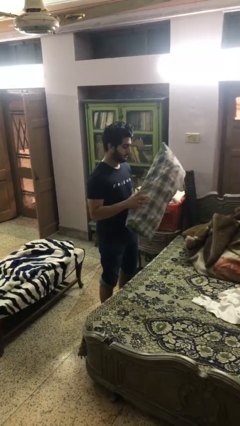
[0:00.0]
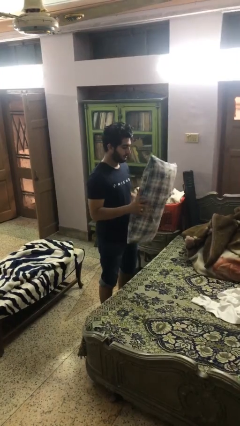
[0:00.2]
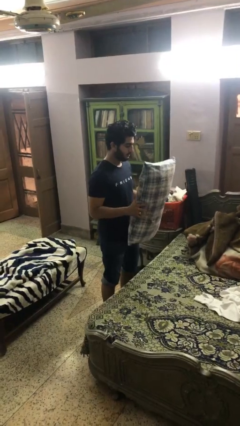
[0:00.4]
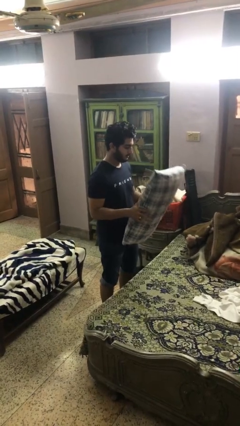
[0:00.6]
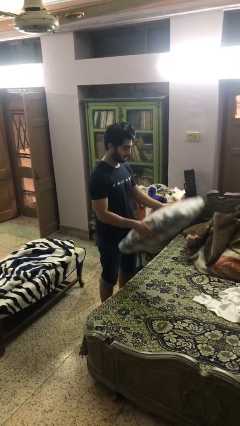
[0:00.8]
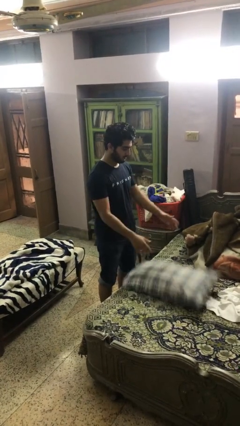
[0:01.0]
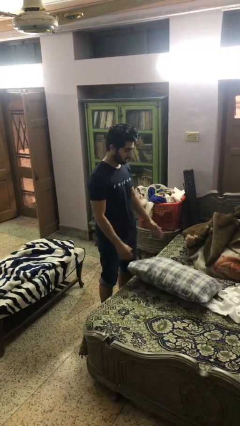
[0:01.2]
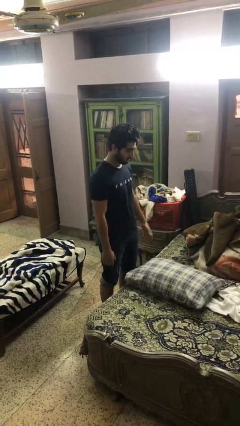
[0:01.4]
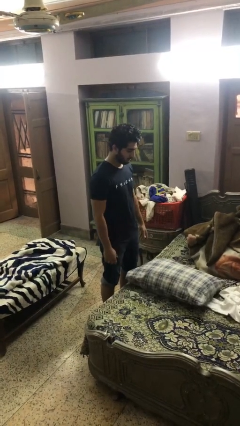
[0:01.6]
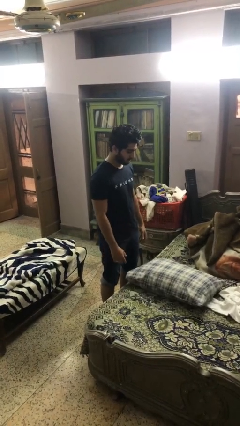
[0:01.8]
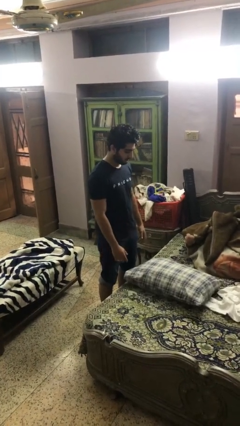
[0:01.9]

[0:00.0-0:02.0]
person puts down object on bed

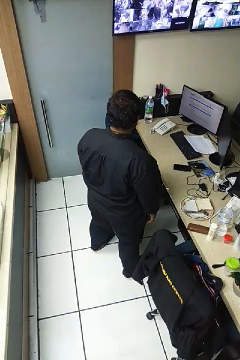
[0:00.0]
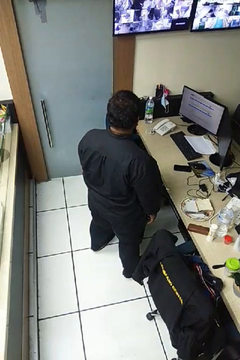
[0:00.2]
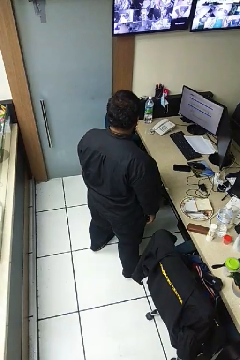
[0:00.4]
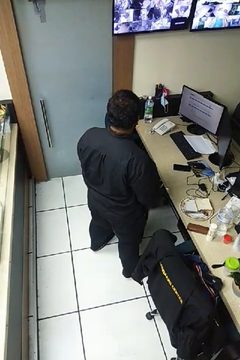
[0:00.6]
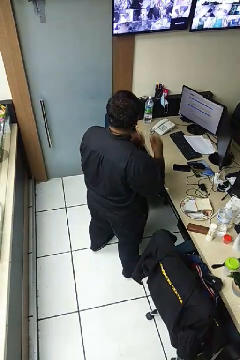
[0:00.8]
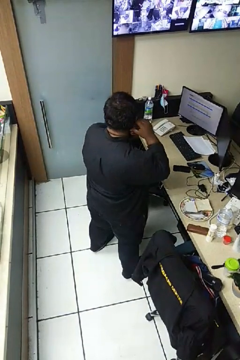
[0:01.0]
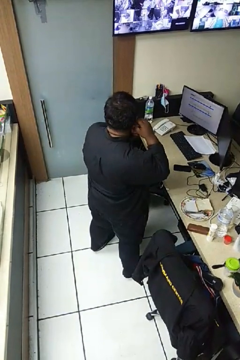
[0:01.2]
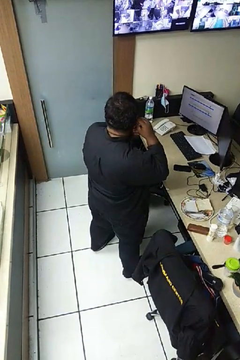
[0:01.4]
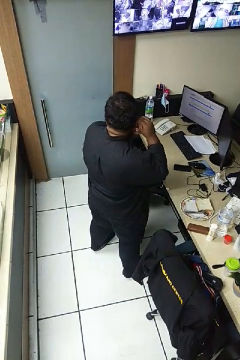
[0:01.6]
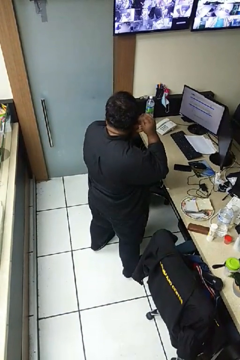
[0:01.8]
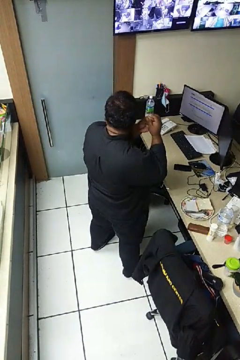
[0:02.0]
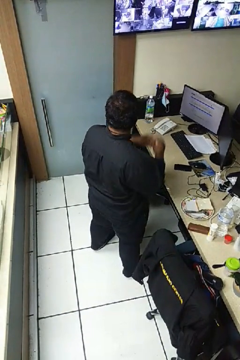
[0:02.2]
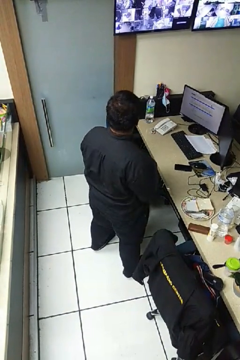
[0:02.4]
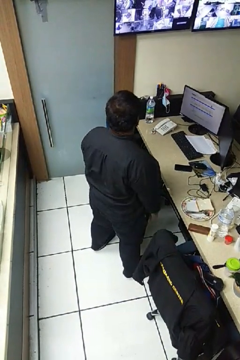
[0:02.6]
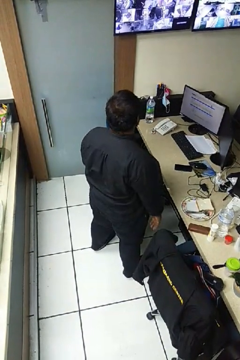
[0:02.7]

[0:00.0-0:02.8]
person takes off earrings

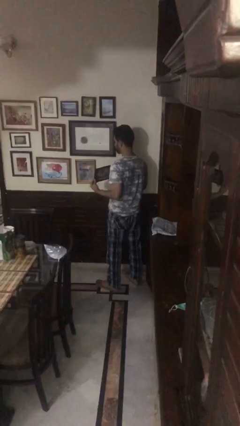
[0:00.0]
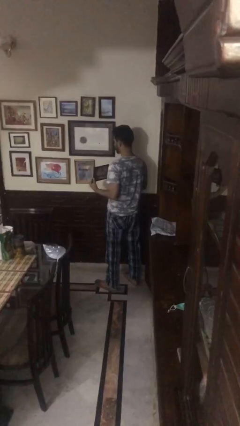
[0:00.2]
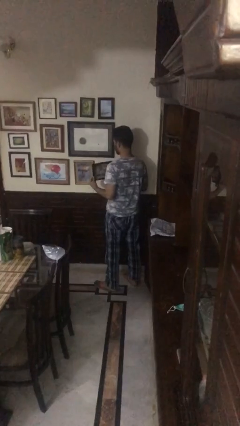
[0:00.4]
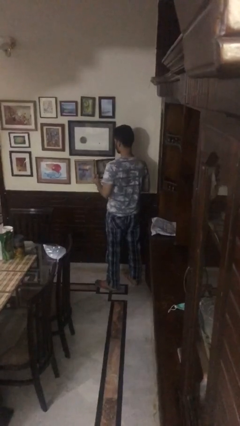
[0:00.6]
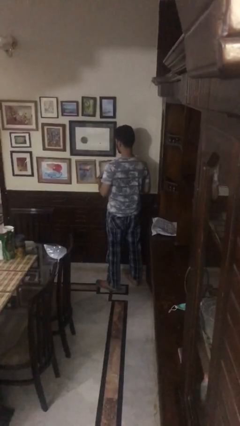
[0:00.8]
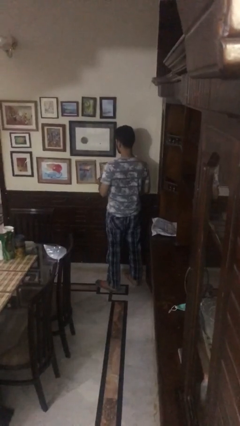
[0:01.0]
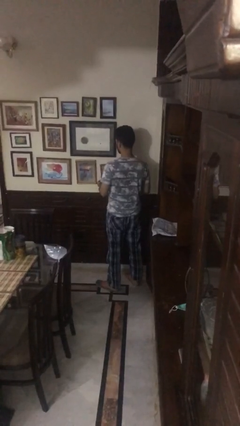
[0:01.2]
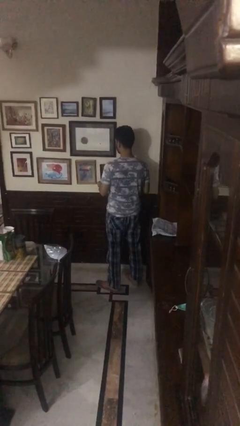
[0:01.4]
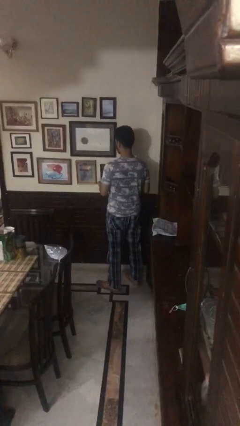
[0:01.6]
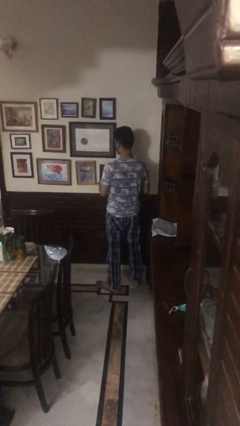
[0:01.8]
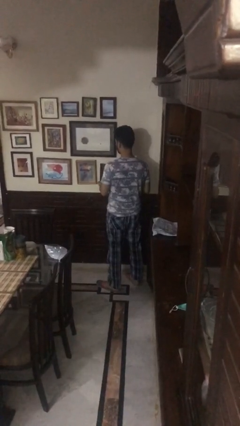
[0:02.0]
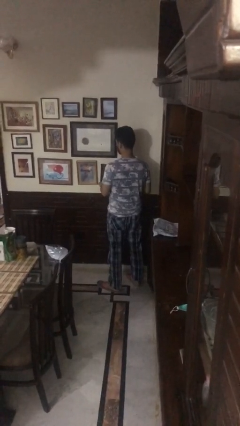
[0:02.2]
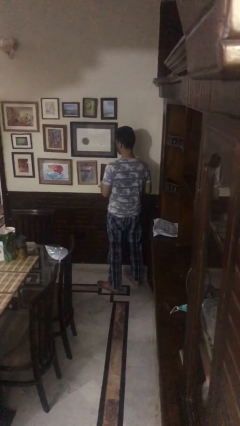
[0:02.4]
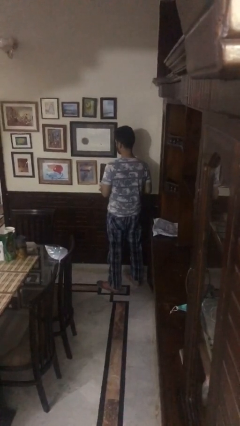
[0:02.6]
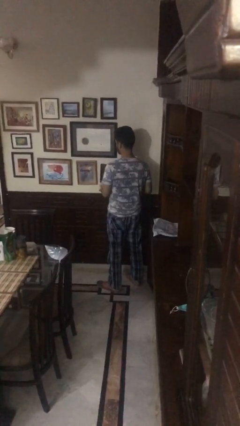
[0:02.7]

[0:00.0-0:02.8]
person puts up picture frame

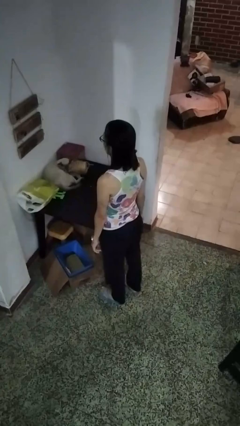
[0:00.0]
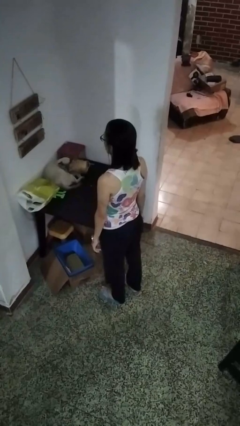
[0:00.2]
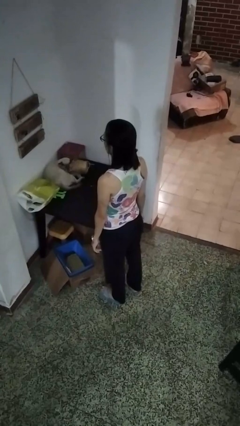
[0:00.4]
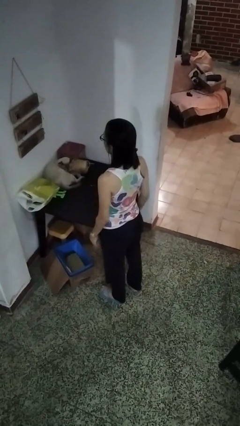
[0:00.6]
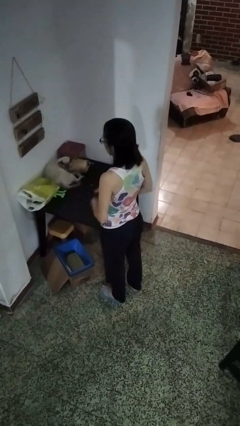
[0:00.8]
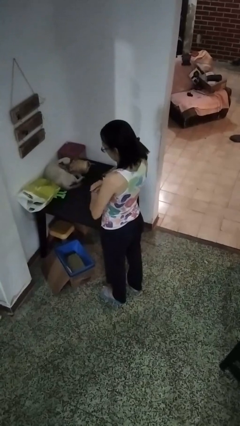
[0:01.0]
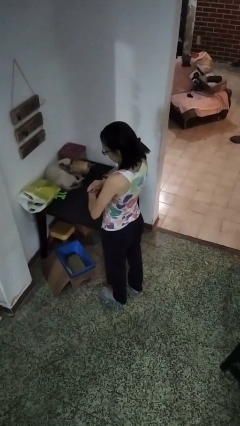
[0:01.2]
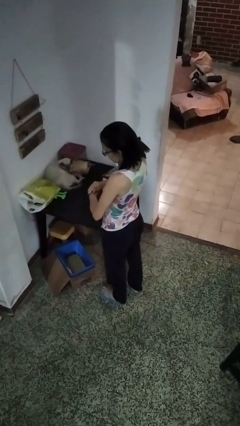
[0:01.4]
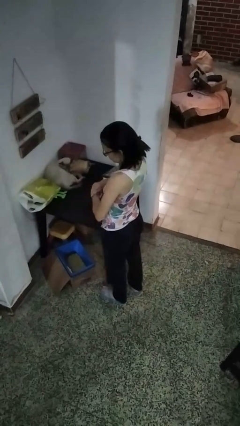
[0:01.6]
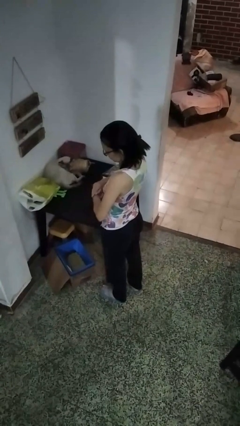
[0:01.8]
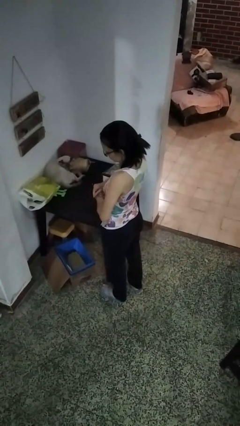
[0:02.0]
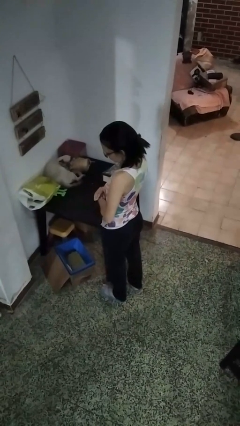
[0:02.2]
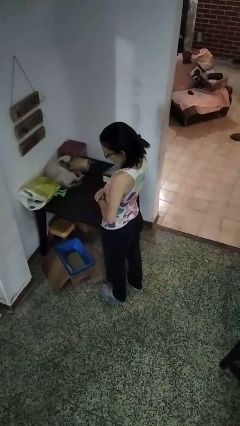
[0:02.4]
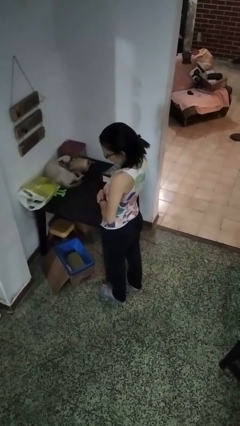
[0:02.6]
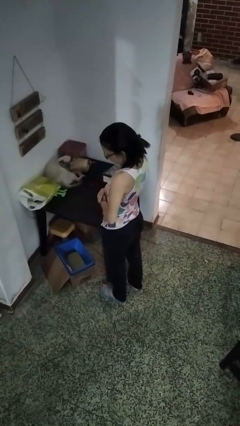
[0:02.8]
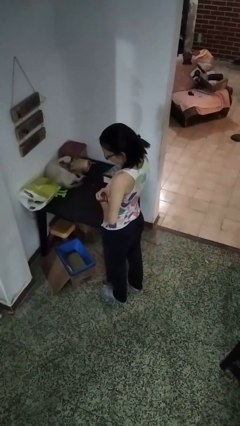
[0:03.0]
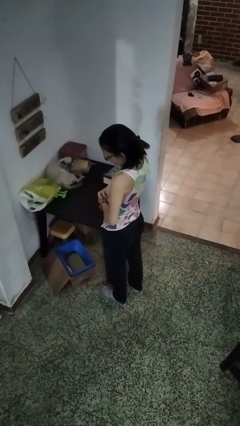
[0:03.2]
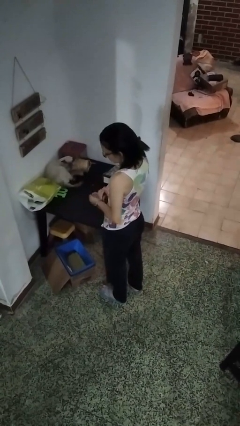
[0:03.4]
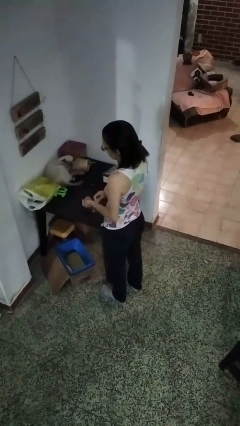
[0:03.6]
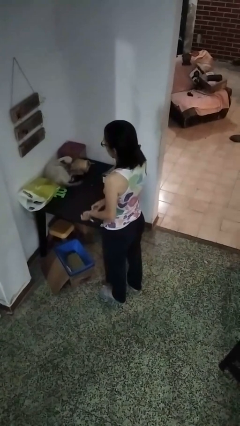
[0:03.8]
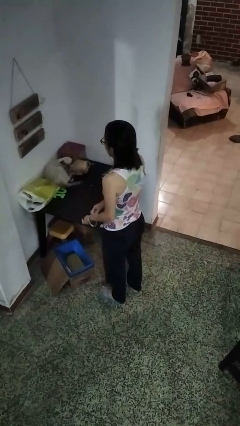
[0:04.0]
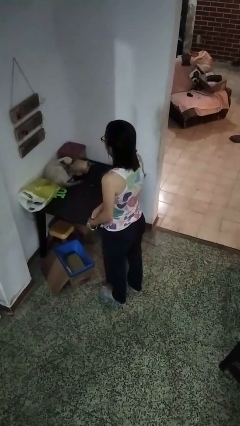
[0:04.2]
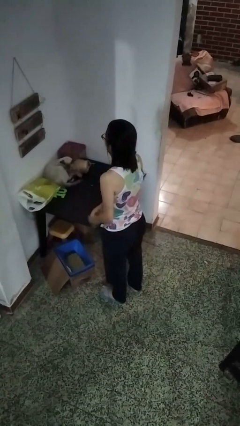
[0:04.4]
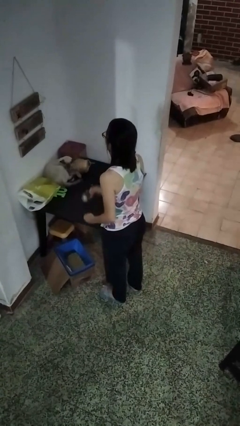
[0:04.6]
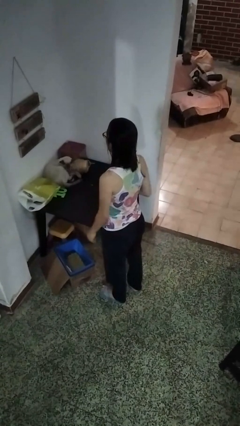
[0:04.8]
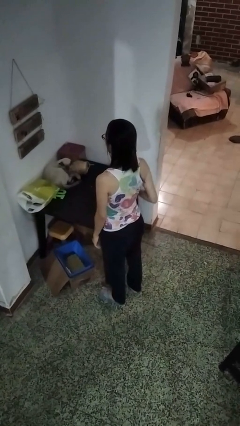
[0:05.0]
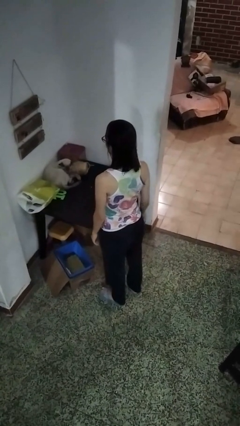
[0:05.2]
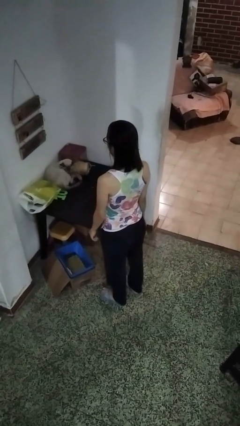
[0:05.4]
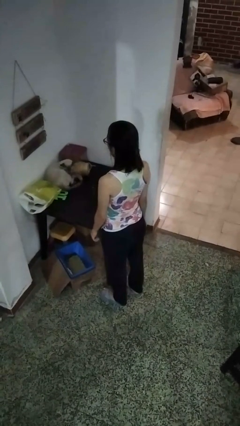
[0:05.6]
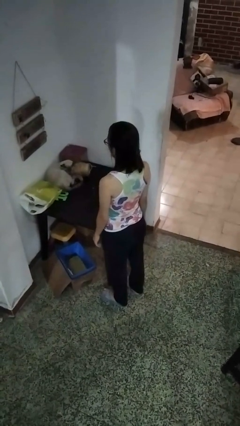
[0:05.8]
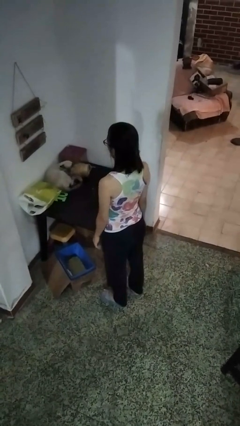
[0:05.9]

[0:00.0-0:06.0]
person takes off wristwatch

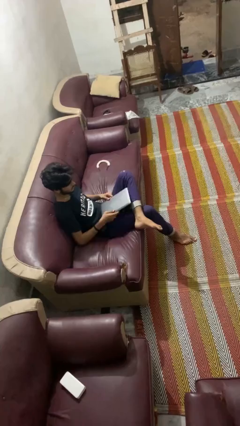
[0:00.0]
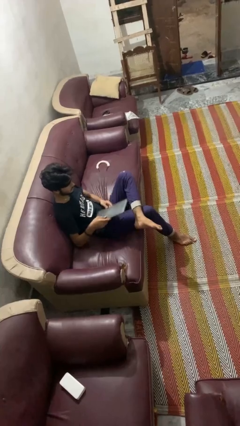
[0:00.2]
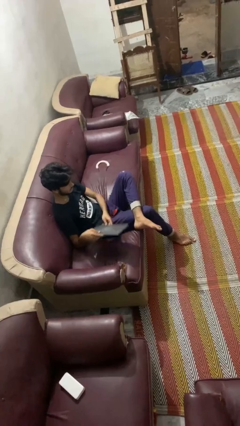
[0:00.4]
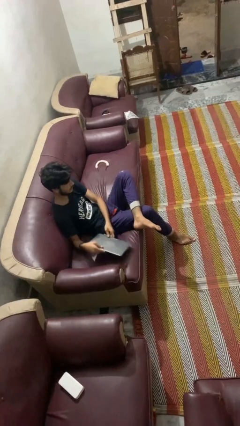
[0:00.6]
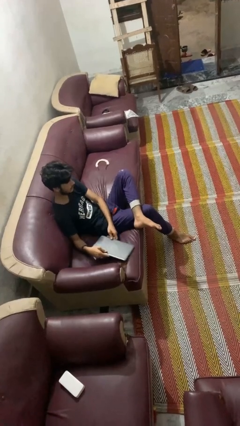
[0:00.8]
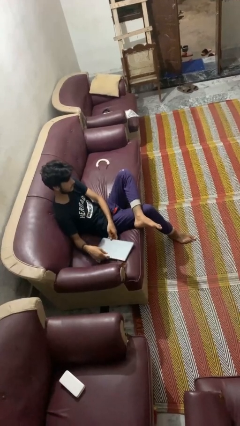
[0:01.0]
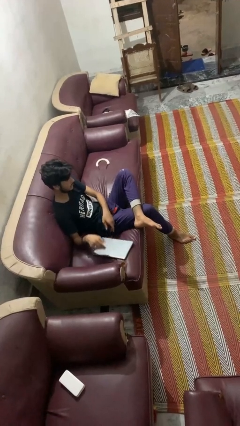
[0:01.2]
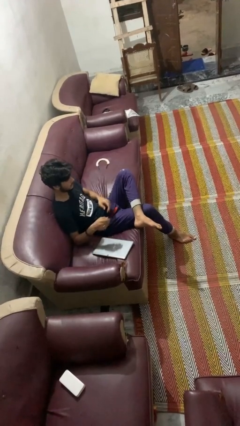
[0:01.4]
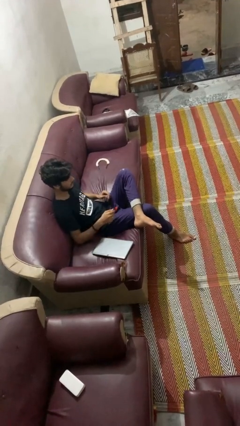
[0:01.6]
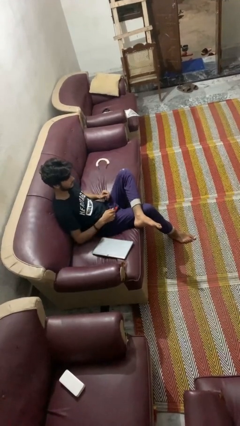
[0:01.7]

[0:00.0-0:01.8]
person puts down object on couch

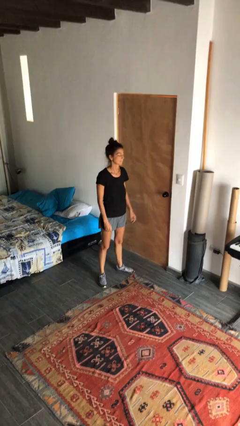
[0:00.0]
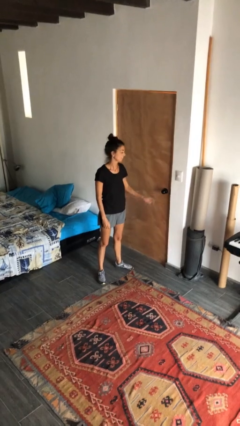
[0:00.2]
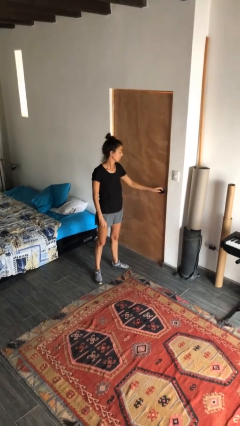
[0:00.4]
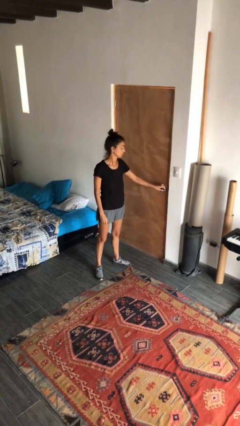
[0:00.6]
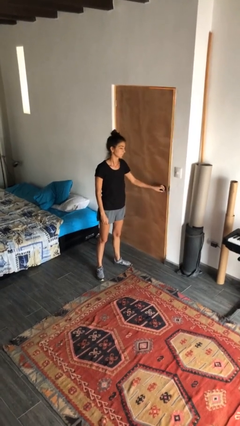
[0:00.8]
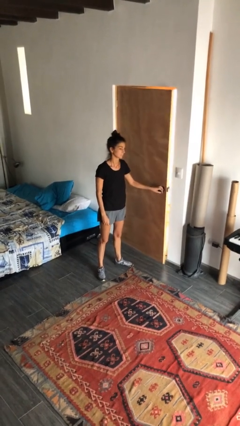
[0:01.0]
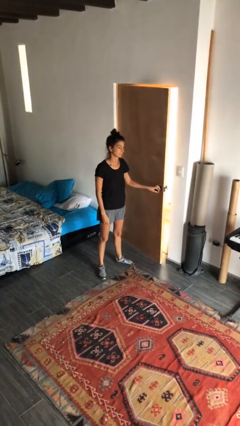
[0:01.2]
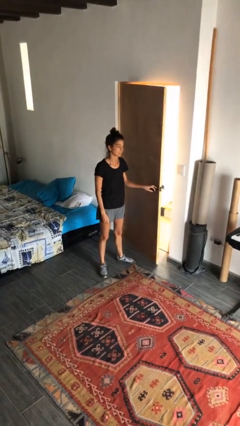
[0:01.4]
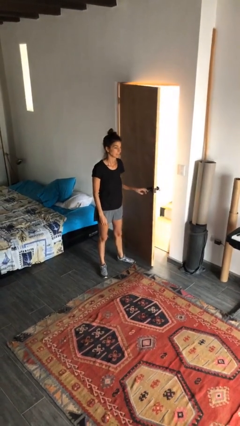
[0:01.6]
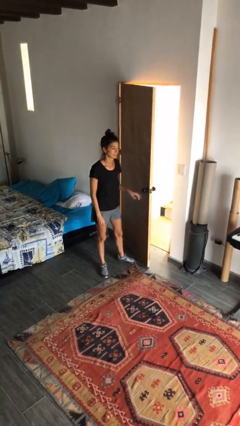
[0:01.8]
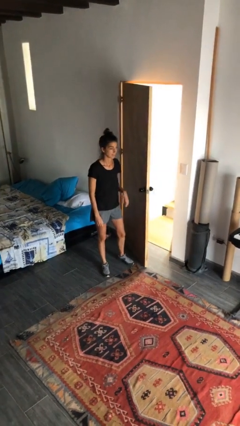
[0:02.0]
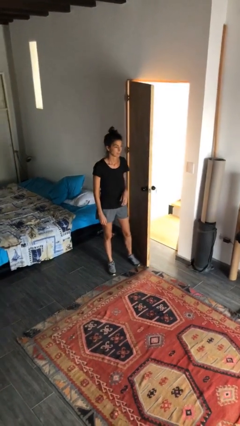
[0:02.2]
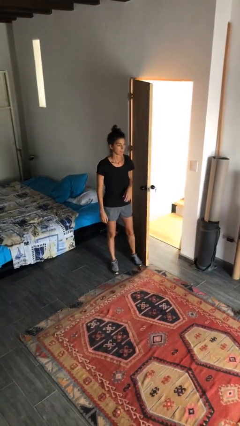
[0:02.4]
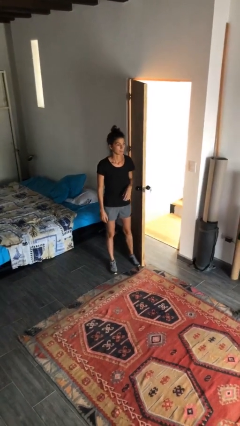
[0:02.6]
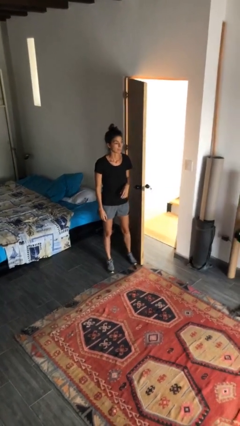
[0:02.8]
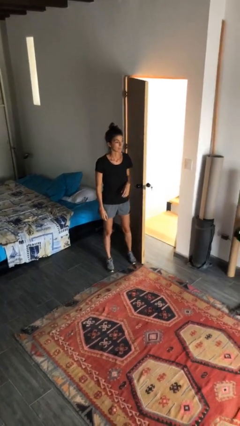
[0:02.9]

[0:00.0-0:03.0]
person opens facility door
